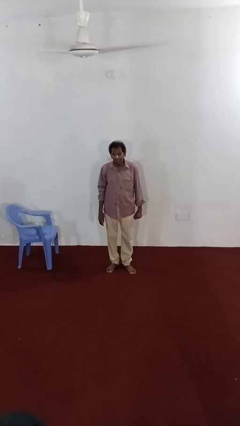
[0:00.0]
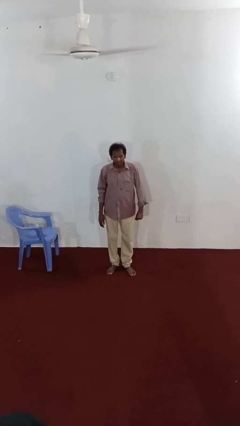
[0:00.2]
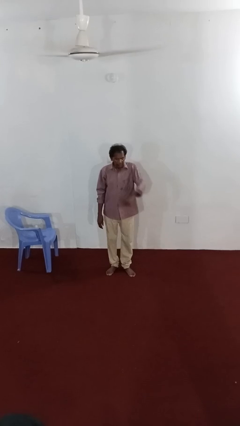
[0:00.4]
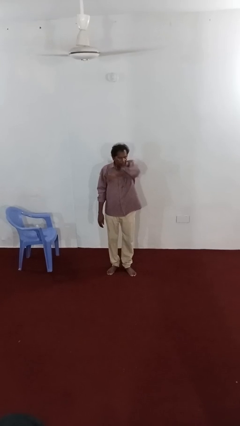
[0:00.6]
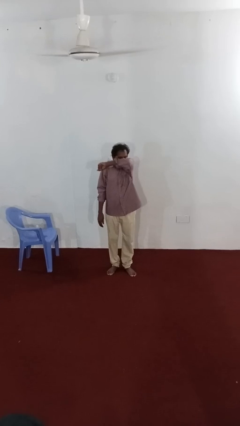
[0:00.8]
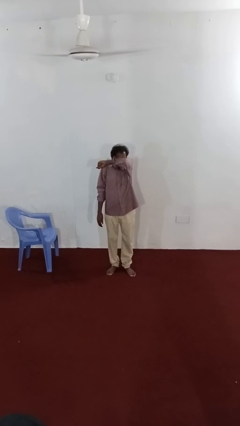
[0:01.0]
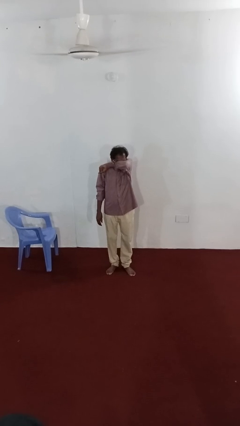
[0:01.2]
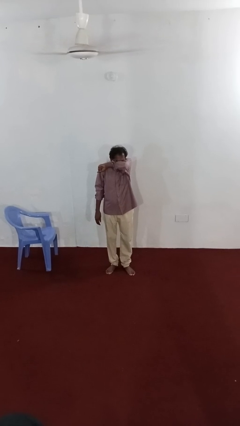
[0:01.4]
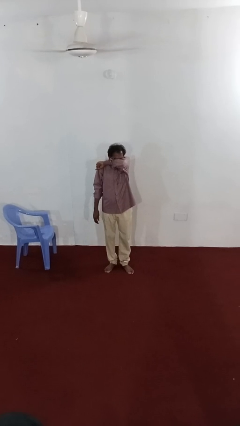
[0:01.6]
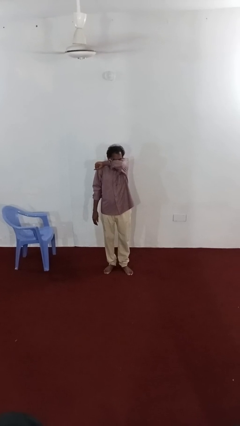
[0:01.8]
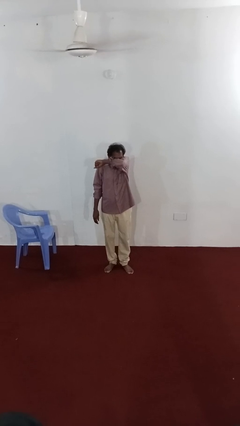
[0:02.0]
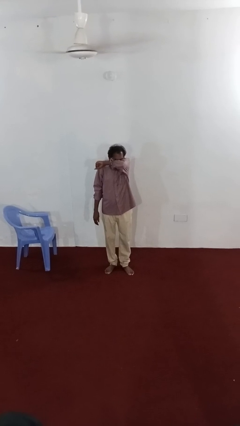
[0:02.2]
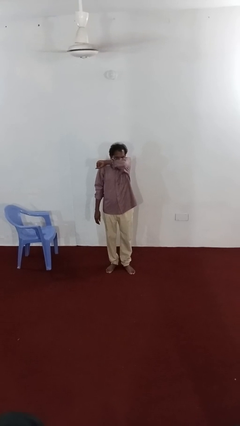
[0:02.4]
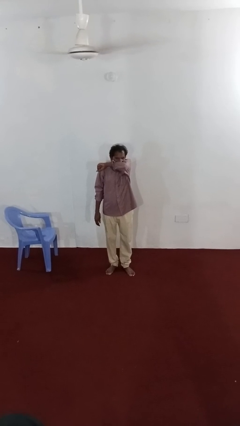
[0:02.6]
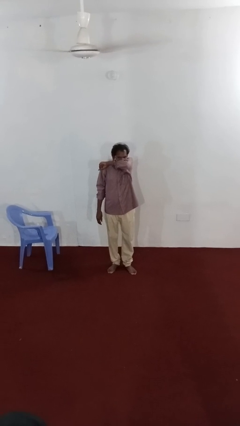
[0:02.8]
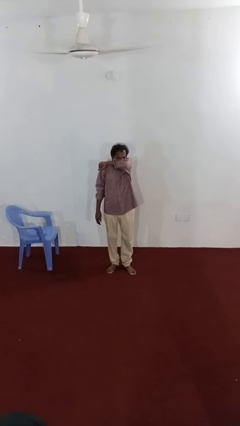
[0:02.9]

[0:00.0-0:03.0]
person sneezes into arm

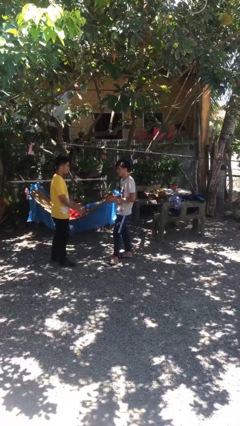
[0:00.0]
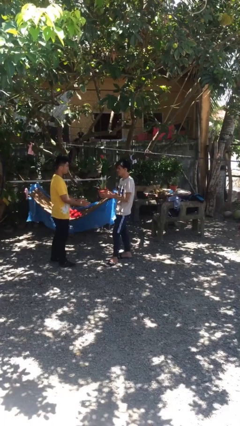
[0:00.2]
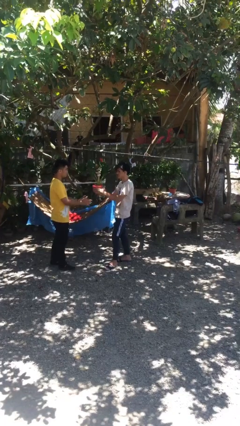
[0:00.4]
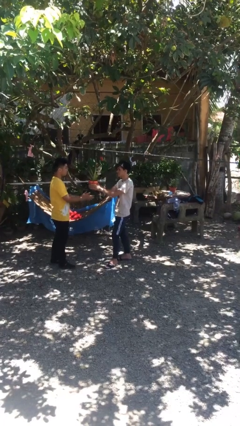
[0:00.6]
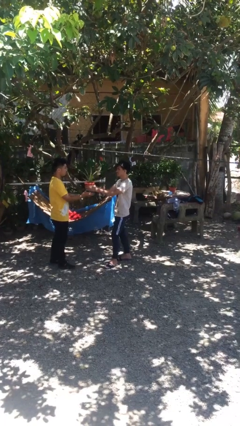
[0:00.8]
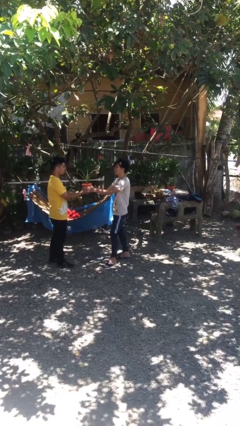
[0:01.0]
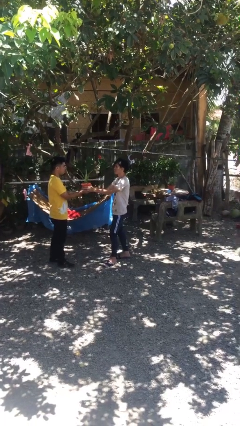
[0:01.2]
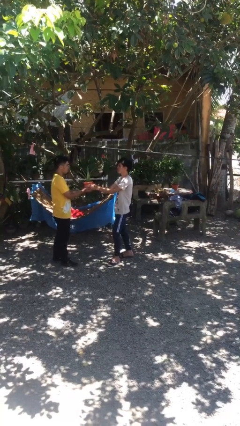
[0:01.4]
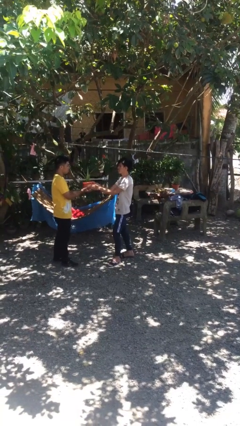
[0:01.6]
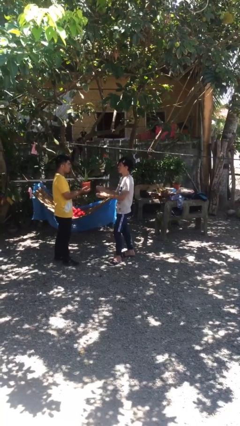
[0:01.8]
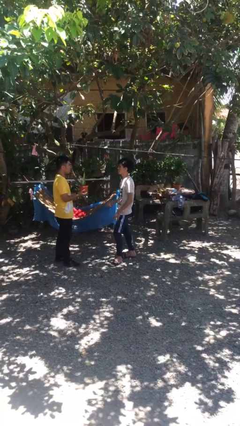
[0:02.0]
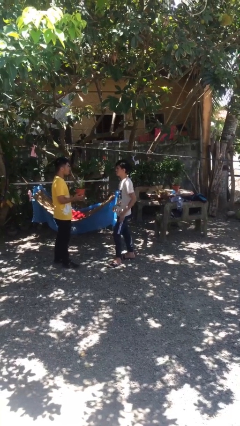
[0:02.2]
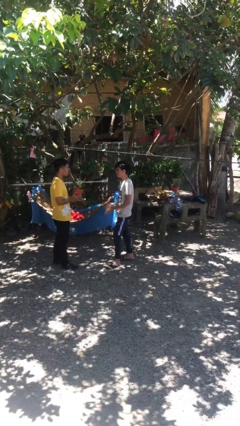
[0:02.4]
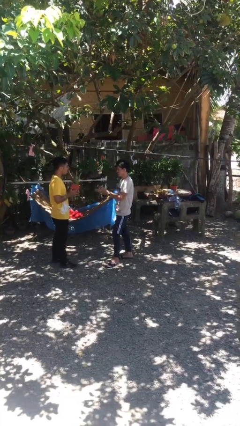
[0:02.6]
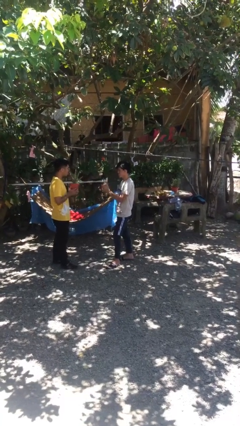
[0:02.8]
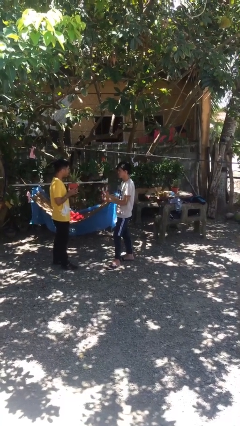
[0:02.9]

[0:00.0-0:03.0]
person transfers object to person

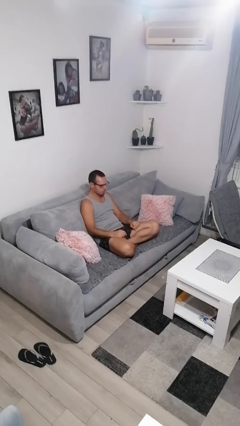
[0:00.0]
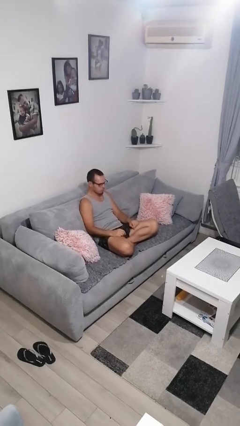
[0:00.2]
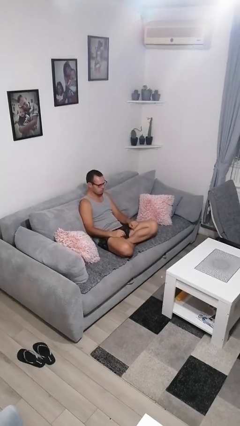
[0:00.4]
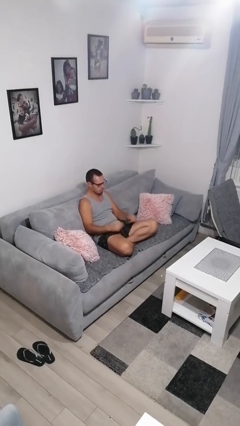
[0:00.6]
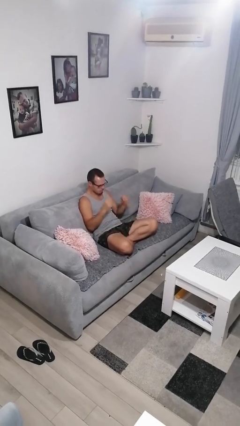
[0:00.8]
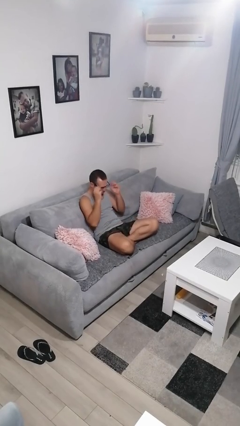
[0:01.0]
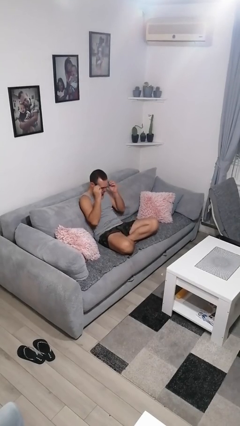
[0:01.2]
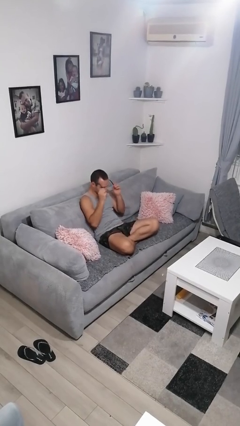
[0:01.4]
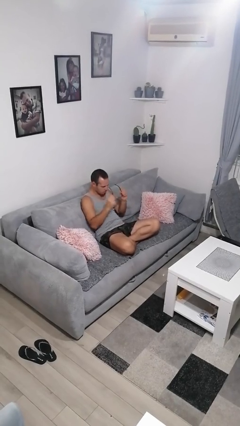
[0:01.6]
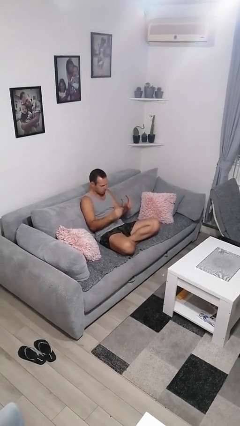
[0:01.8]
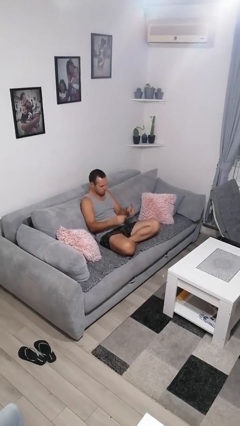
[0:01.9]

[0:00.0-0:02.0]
person takes off glasses

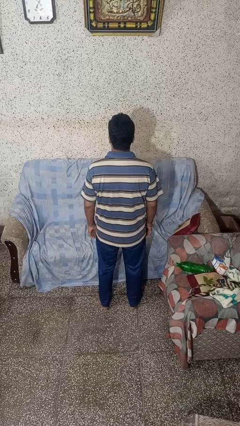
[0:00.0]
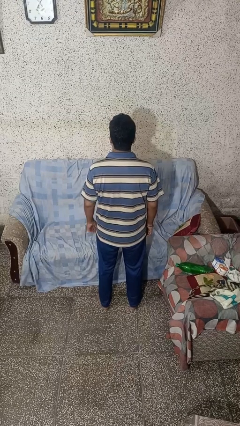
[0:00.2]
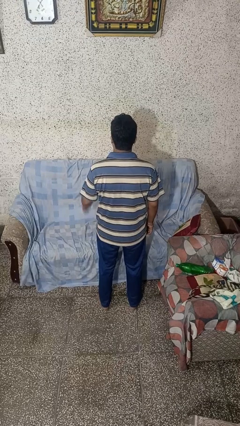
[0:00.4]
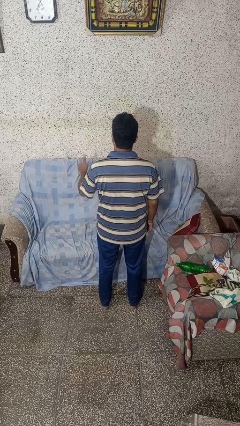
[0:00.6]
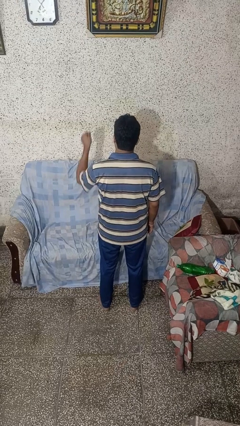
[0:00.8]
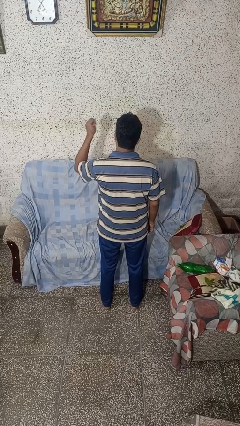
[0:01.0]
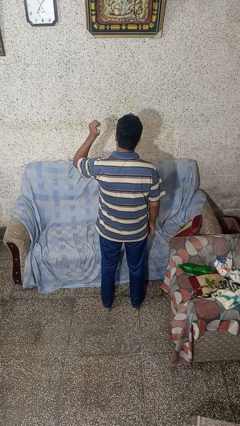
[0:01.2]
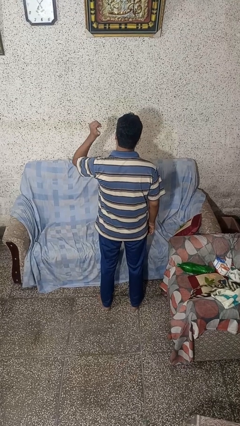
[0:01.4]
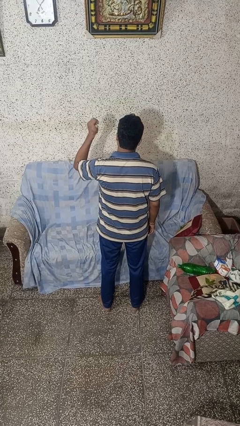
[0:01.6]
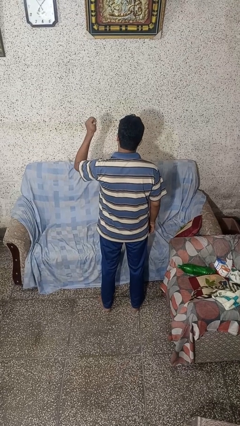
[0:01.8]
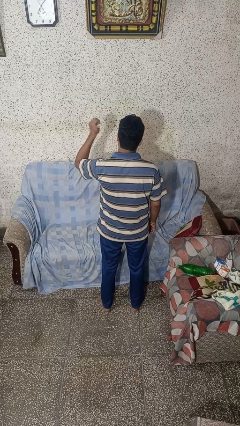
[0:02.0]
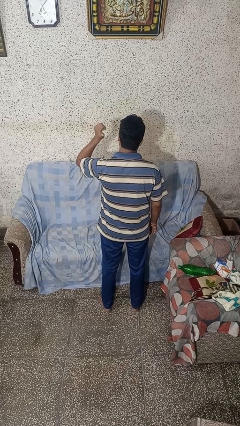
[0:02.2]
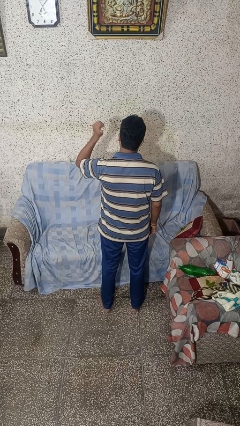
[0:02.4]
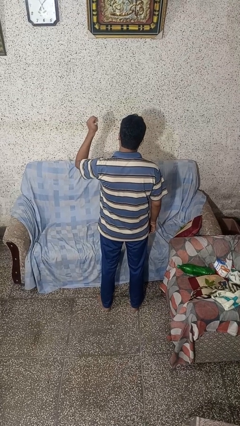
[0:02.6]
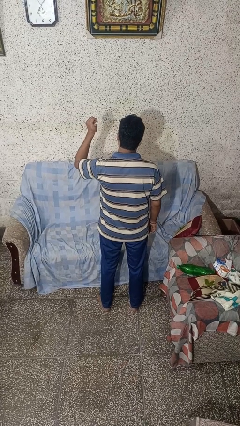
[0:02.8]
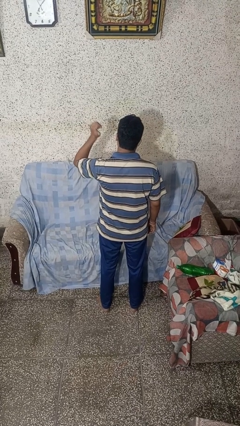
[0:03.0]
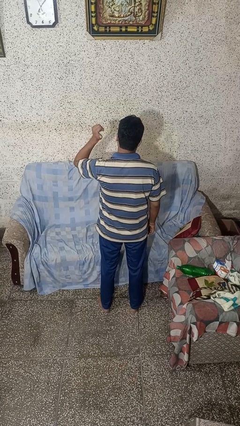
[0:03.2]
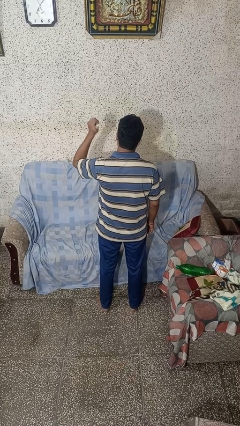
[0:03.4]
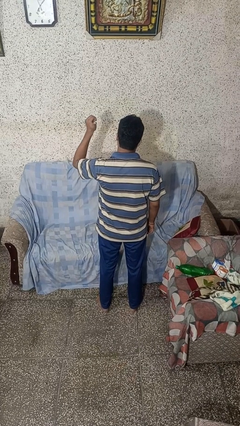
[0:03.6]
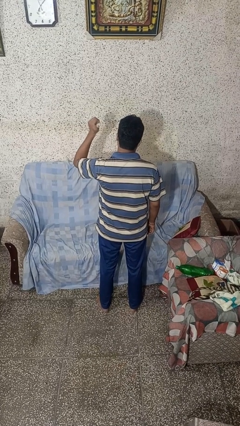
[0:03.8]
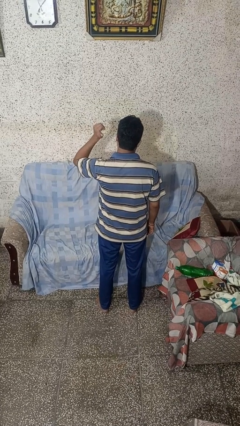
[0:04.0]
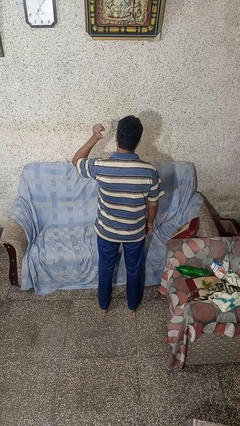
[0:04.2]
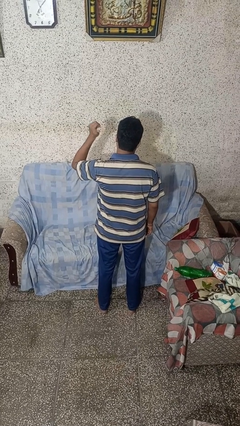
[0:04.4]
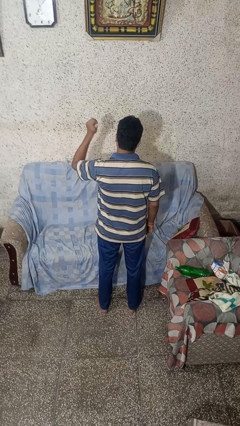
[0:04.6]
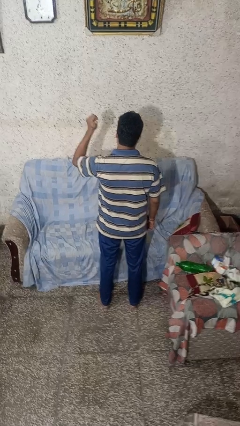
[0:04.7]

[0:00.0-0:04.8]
person gestures behind me

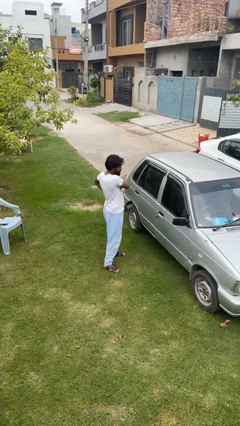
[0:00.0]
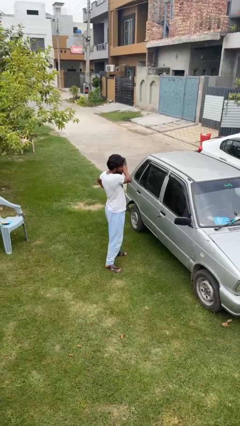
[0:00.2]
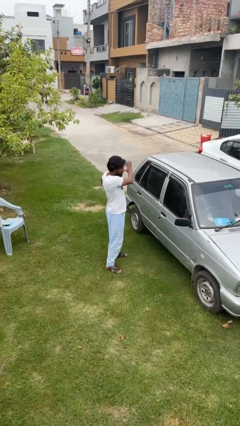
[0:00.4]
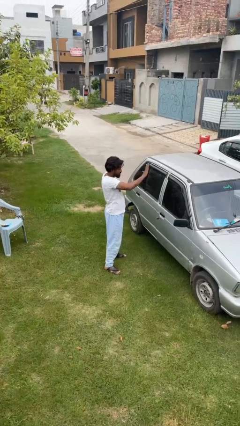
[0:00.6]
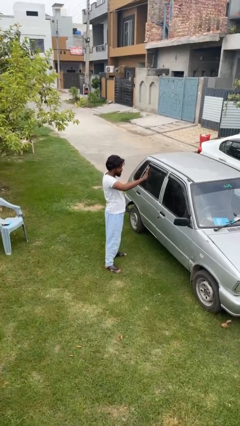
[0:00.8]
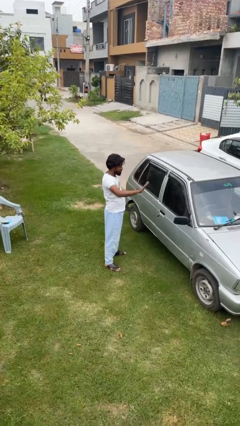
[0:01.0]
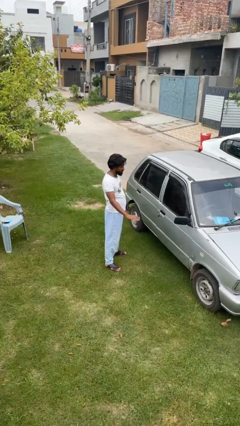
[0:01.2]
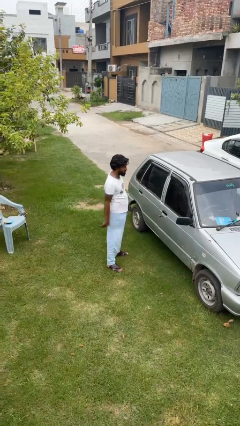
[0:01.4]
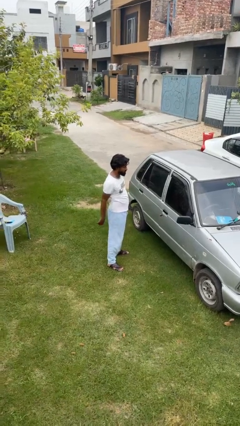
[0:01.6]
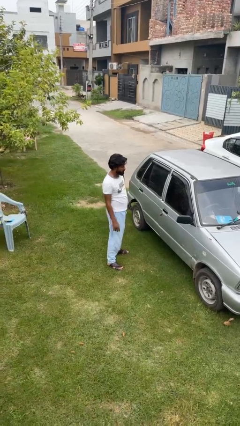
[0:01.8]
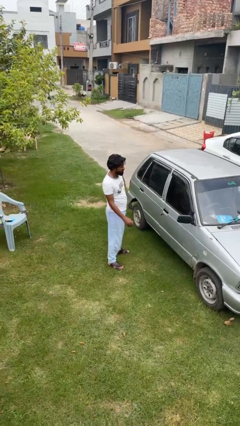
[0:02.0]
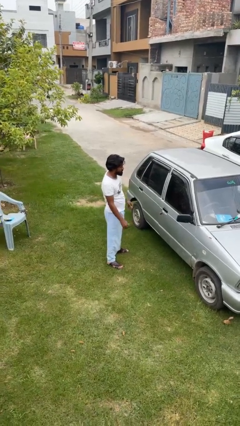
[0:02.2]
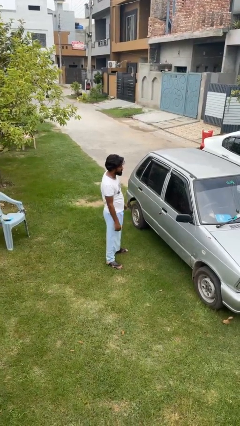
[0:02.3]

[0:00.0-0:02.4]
person gestures swipe right

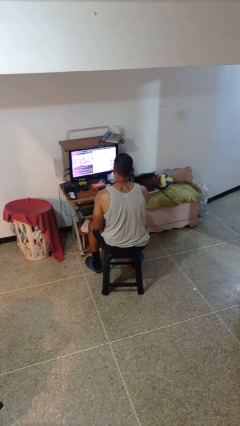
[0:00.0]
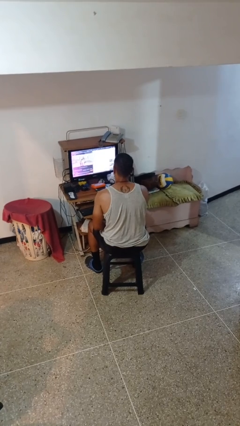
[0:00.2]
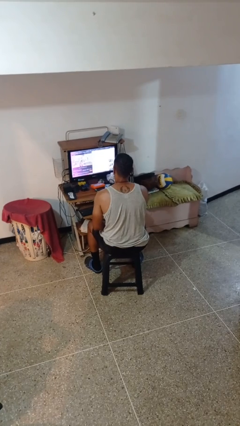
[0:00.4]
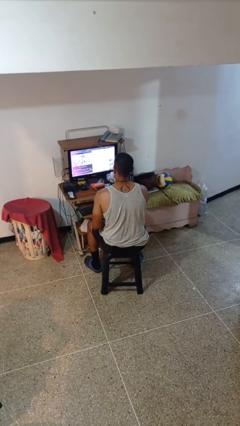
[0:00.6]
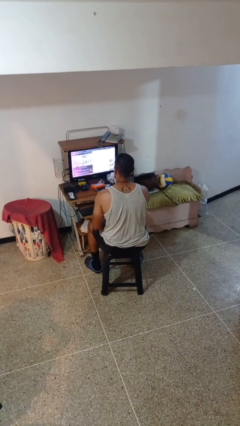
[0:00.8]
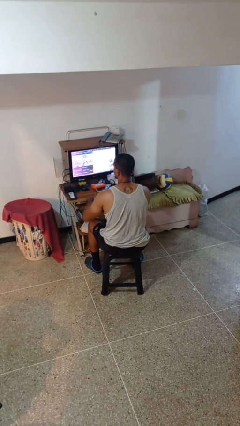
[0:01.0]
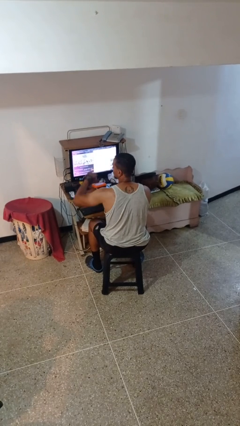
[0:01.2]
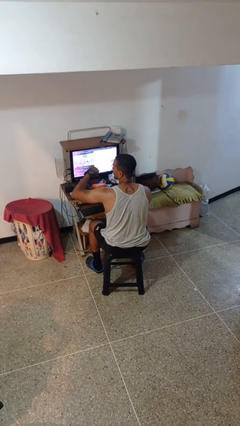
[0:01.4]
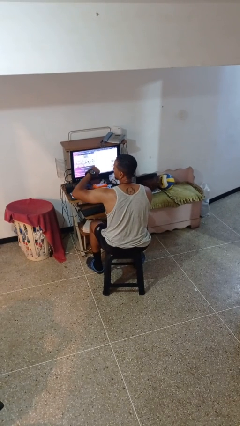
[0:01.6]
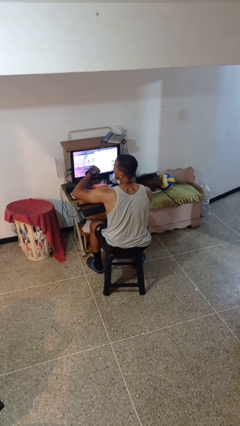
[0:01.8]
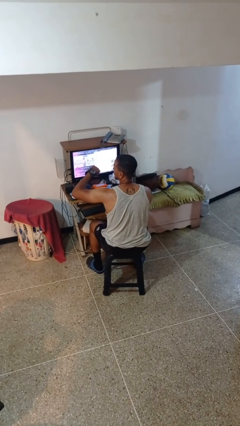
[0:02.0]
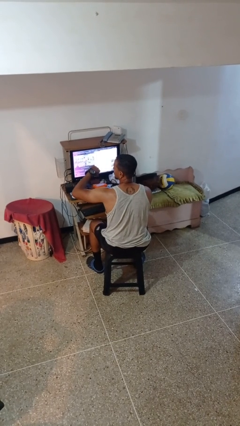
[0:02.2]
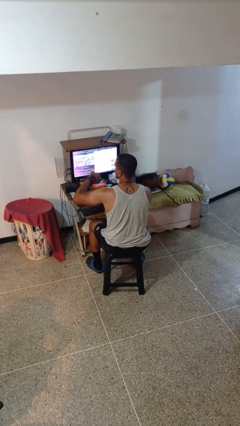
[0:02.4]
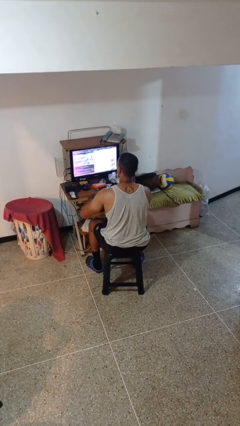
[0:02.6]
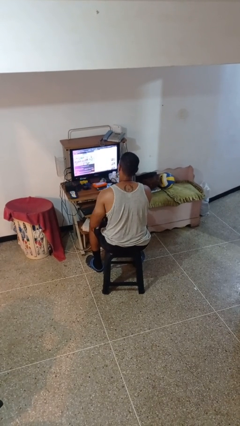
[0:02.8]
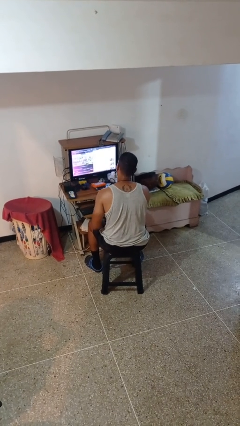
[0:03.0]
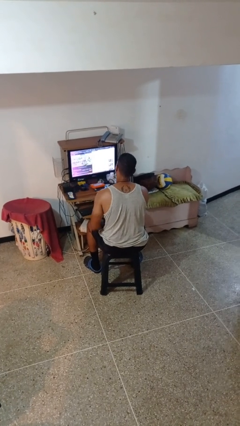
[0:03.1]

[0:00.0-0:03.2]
person looks at wristwatch
